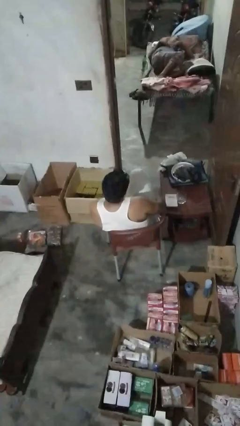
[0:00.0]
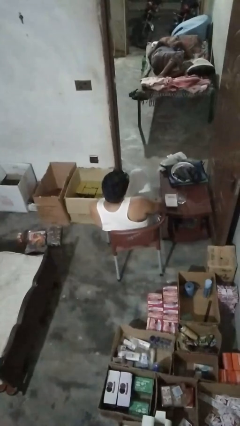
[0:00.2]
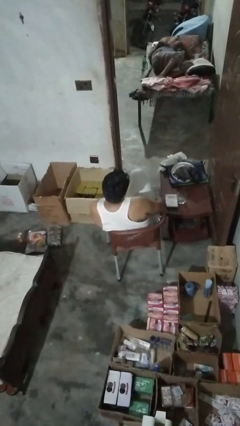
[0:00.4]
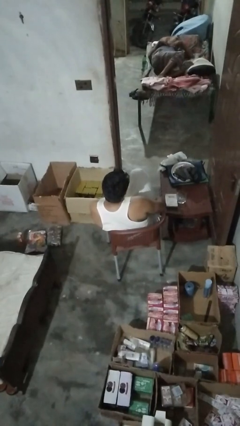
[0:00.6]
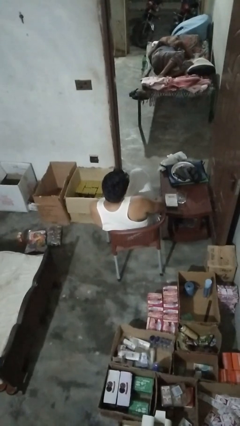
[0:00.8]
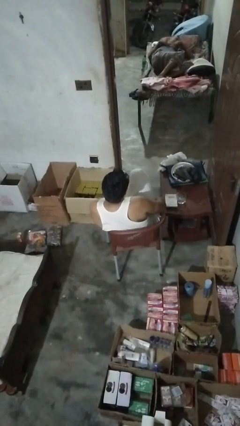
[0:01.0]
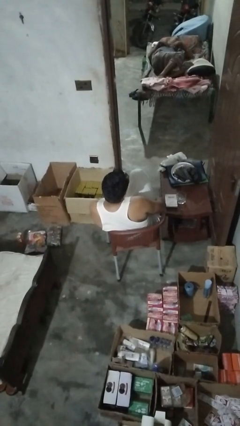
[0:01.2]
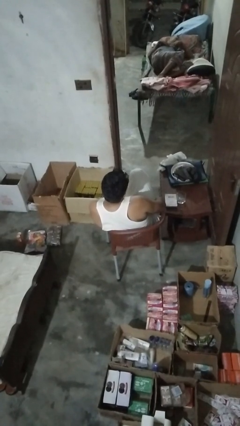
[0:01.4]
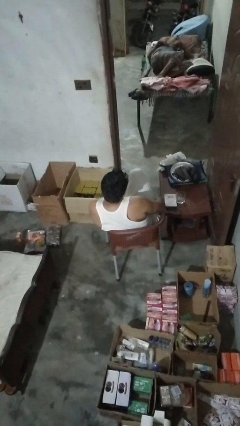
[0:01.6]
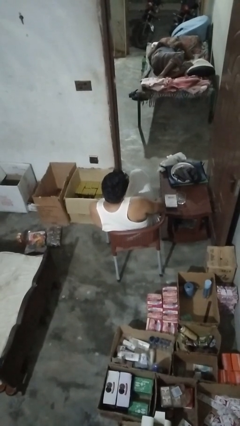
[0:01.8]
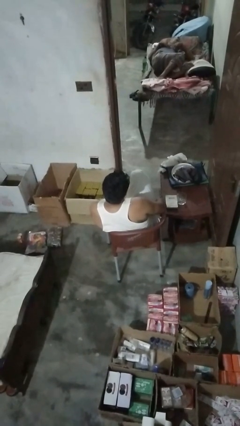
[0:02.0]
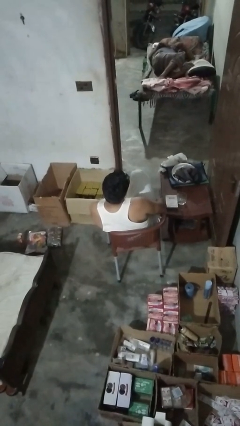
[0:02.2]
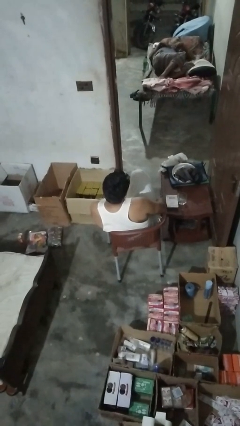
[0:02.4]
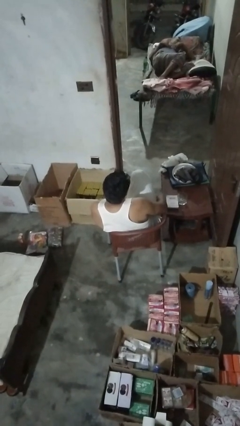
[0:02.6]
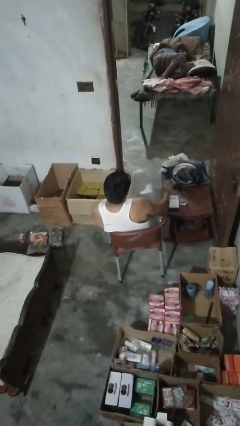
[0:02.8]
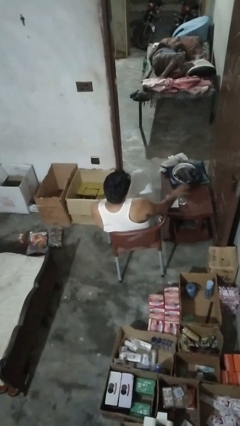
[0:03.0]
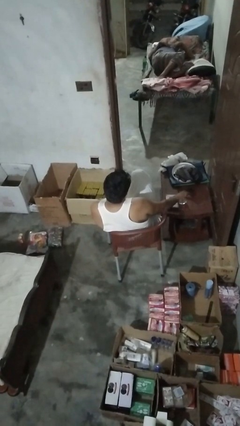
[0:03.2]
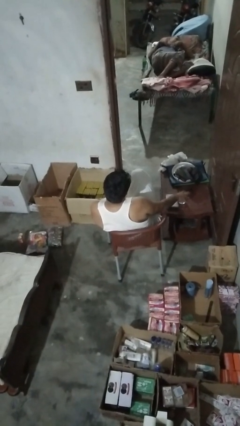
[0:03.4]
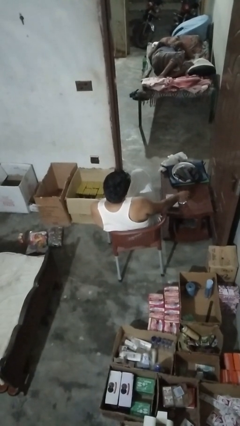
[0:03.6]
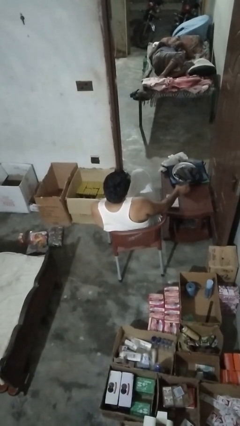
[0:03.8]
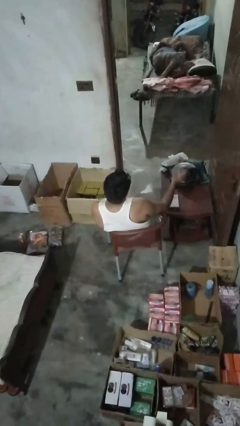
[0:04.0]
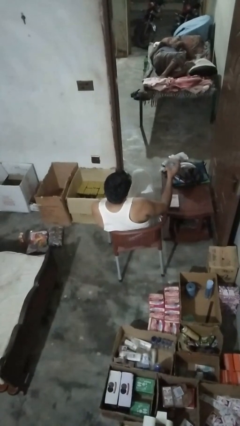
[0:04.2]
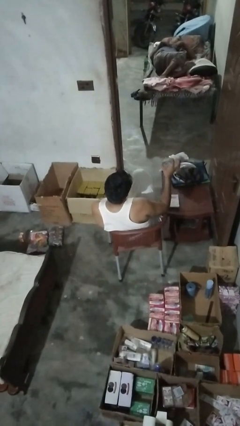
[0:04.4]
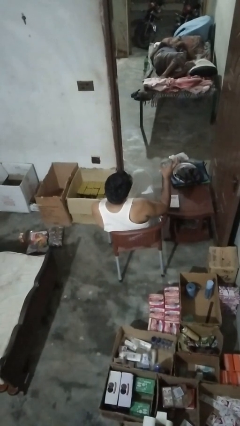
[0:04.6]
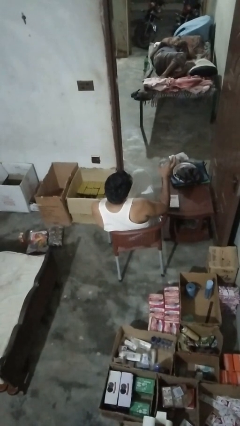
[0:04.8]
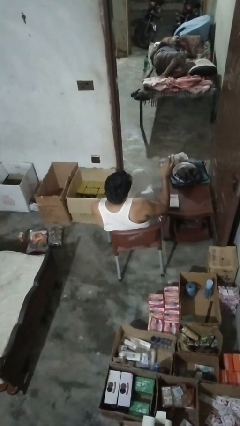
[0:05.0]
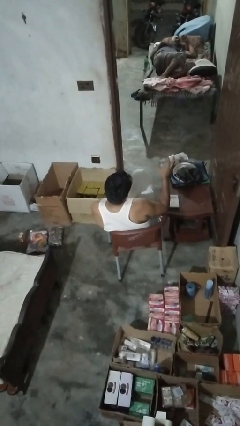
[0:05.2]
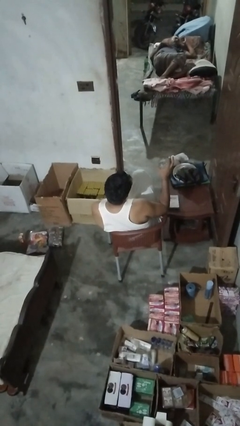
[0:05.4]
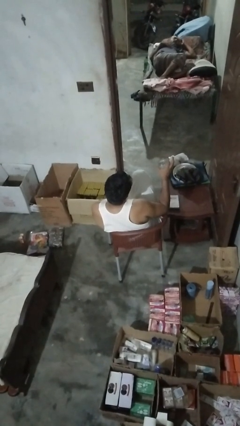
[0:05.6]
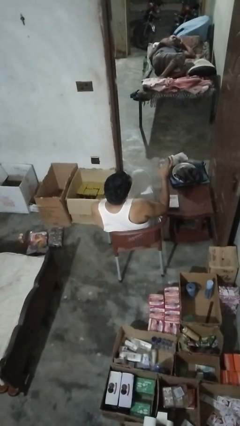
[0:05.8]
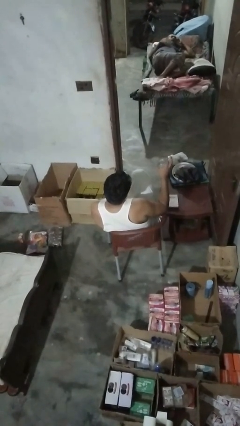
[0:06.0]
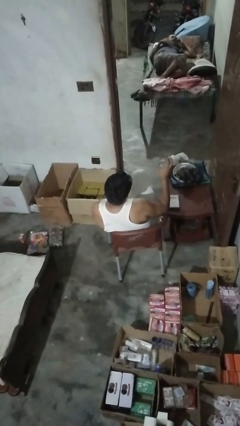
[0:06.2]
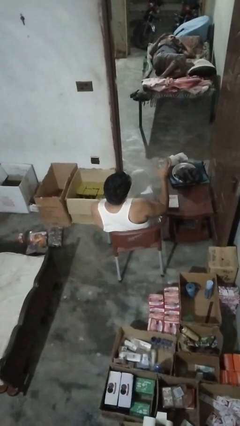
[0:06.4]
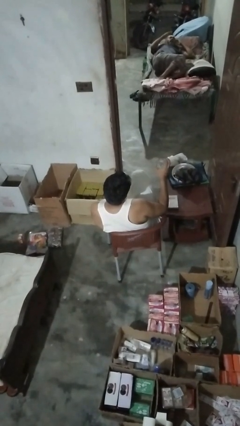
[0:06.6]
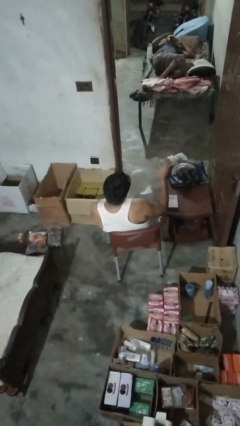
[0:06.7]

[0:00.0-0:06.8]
person knocks over glass

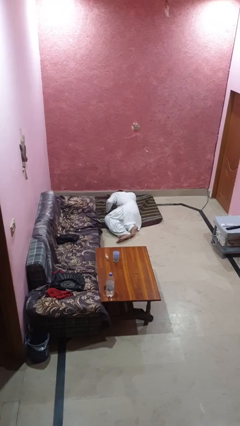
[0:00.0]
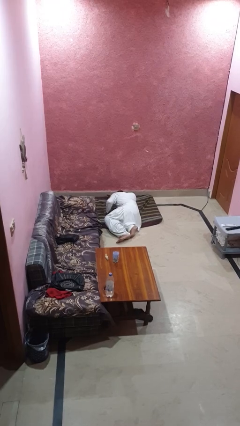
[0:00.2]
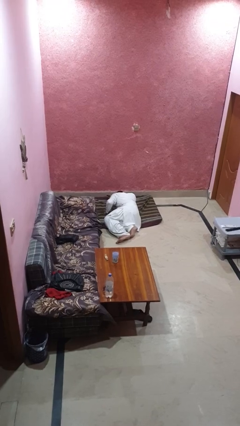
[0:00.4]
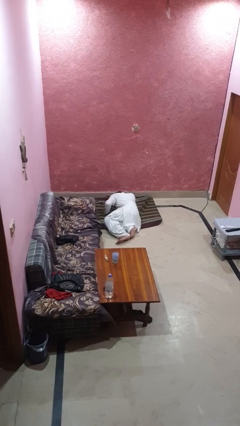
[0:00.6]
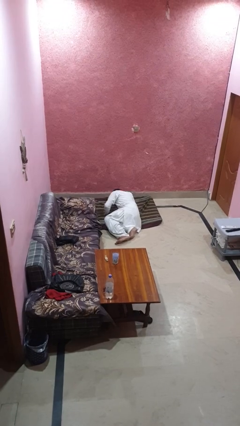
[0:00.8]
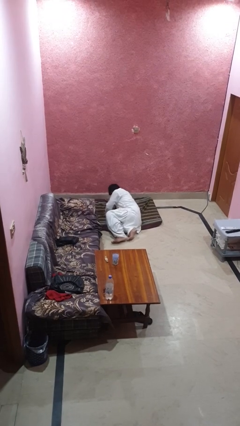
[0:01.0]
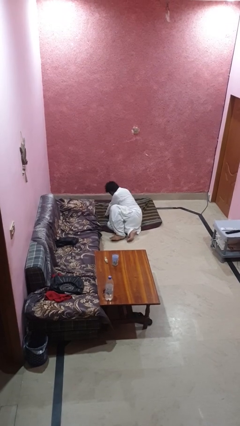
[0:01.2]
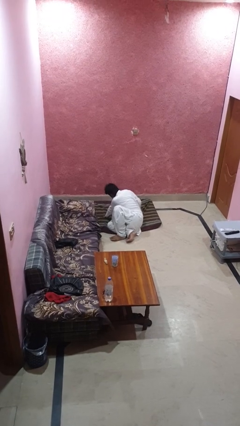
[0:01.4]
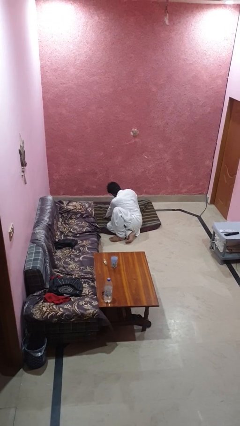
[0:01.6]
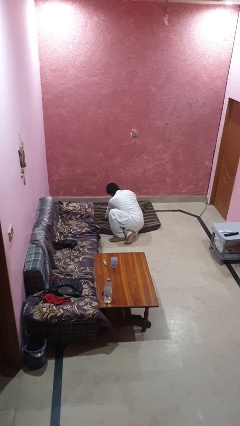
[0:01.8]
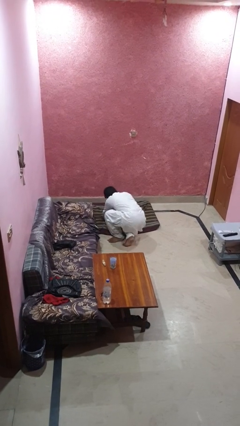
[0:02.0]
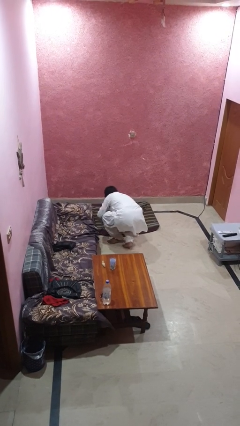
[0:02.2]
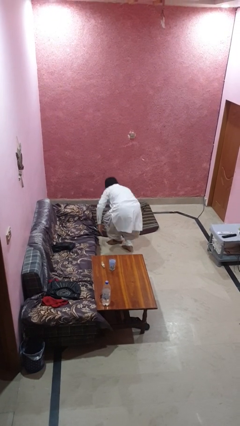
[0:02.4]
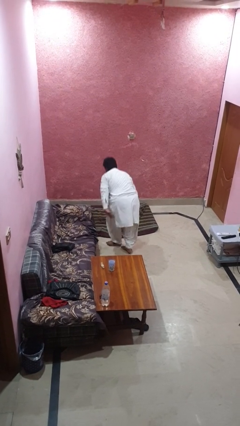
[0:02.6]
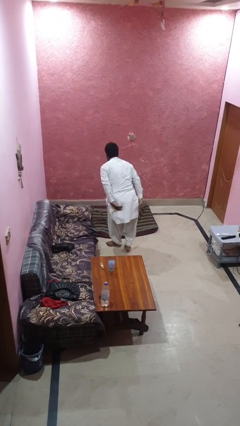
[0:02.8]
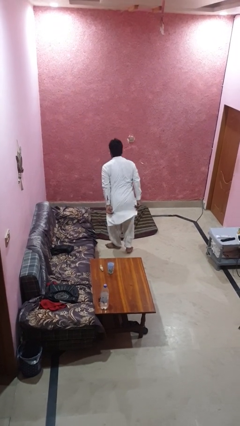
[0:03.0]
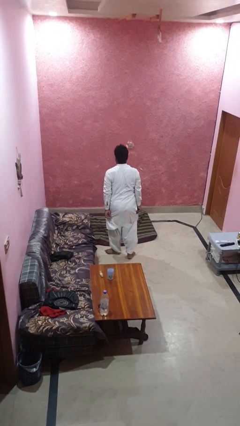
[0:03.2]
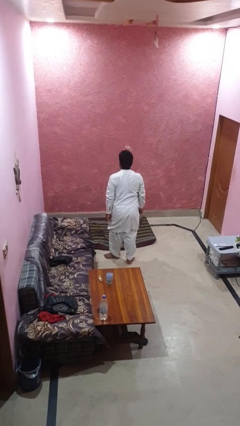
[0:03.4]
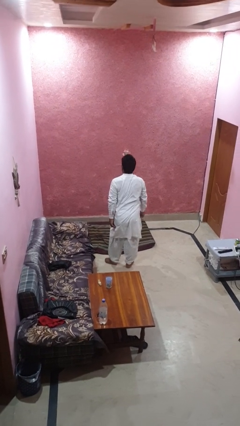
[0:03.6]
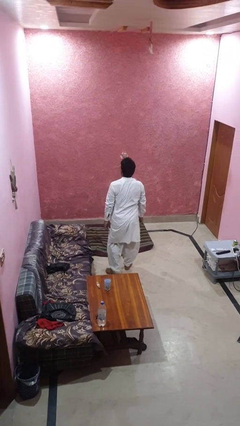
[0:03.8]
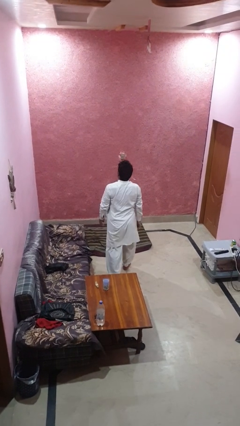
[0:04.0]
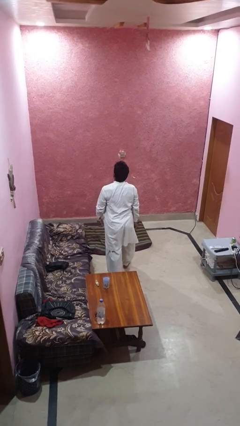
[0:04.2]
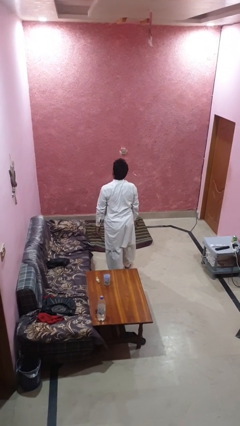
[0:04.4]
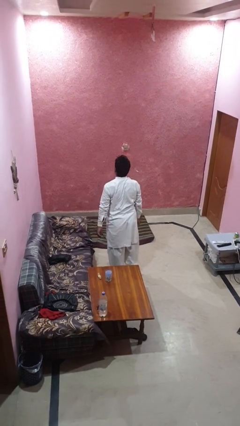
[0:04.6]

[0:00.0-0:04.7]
person stands up from floor

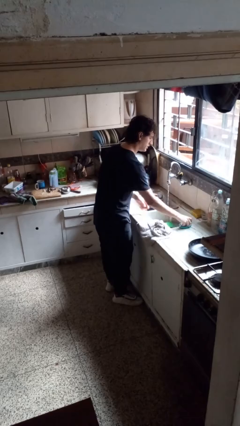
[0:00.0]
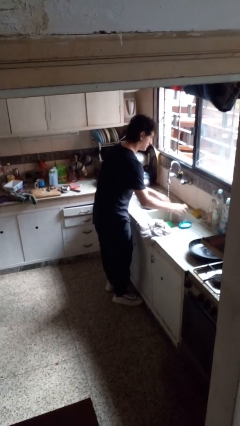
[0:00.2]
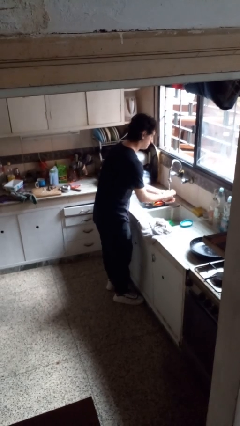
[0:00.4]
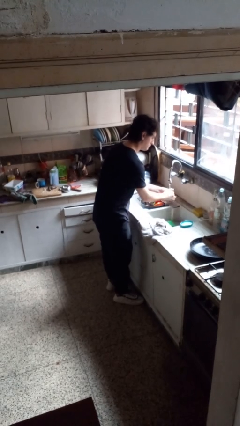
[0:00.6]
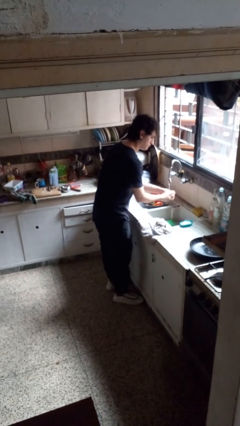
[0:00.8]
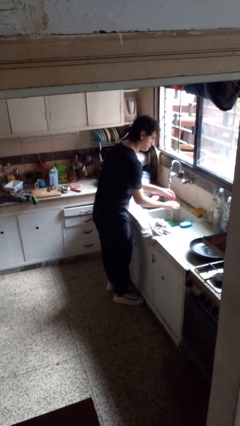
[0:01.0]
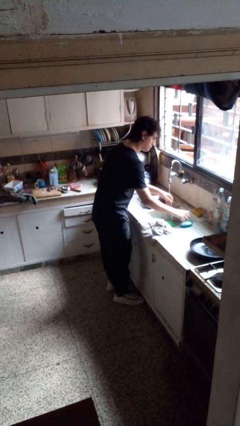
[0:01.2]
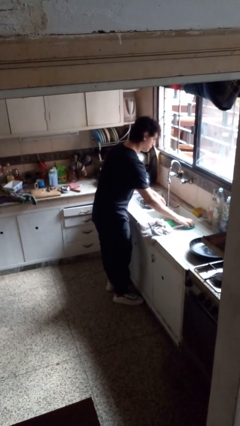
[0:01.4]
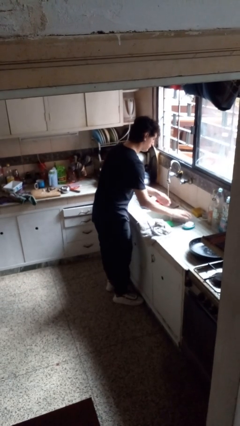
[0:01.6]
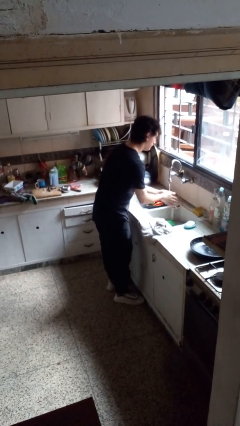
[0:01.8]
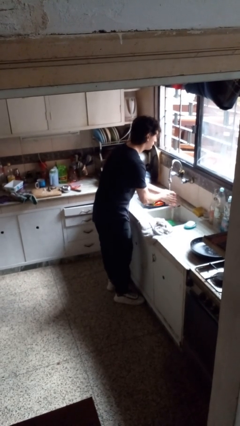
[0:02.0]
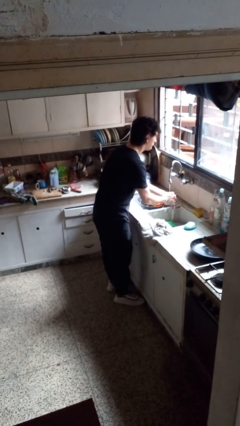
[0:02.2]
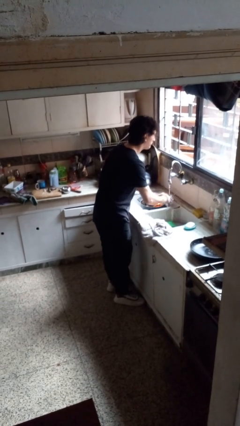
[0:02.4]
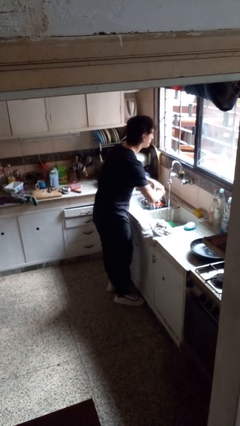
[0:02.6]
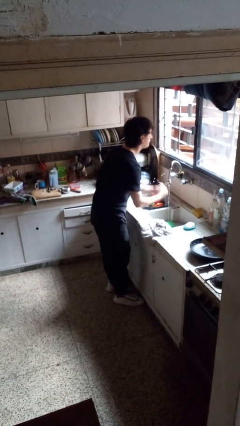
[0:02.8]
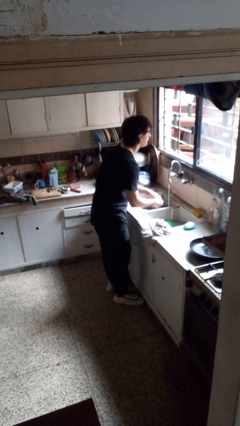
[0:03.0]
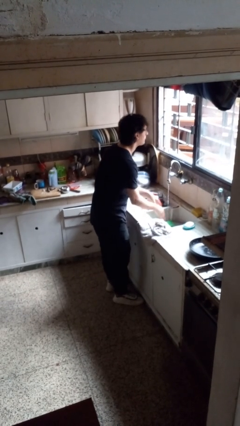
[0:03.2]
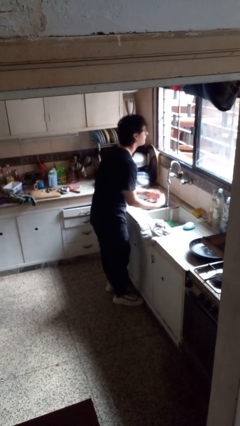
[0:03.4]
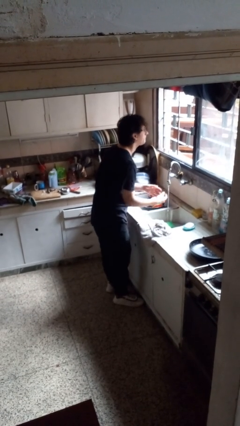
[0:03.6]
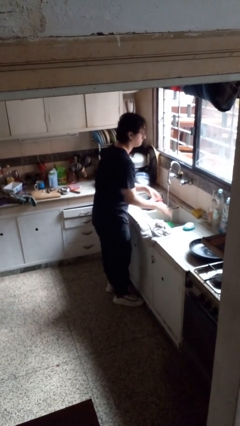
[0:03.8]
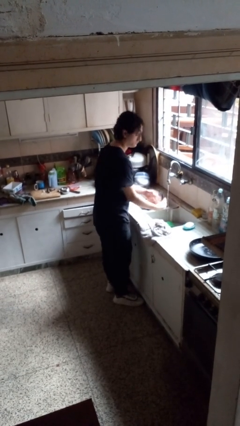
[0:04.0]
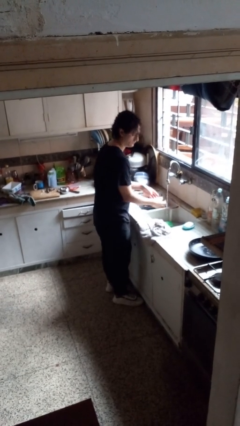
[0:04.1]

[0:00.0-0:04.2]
person washes hands

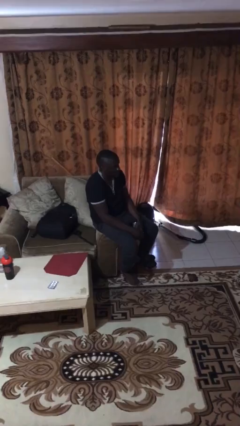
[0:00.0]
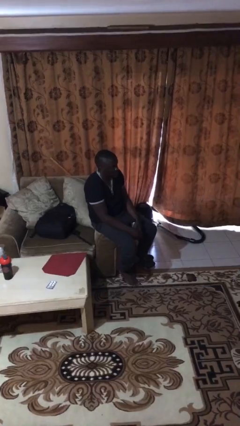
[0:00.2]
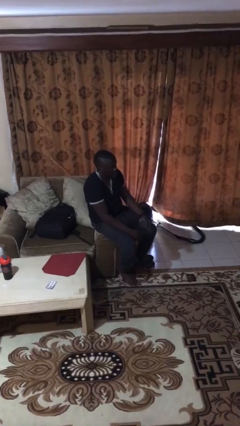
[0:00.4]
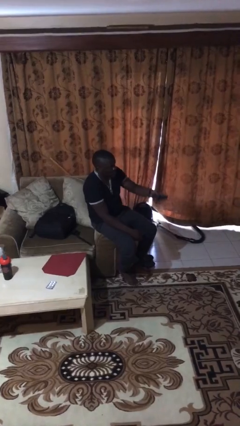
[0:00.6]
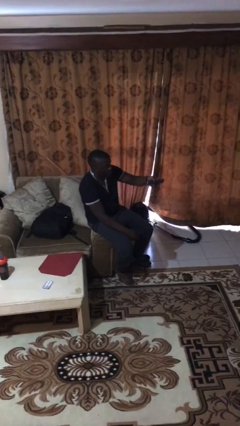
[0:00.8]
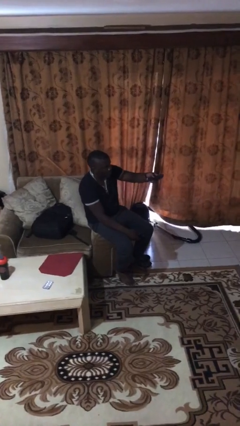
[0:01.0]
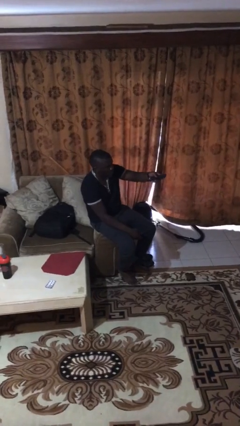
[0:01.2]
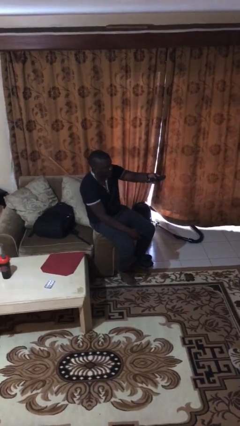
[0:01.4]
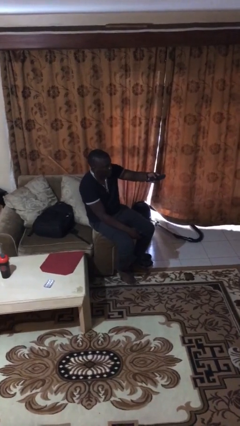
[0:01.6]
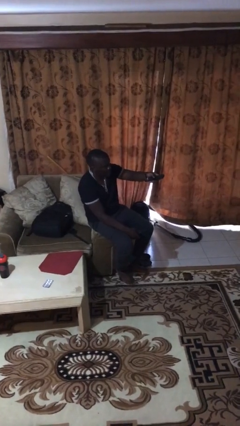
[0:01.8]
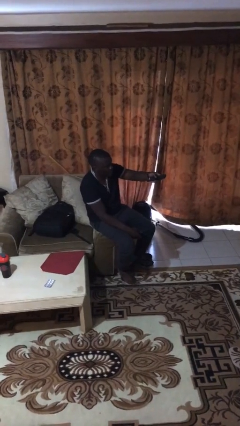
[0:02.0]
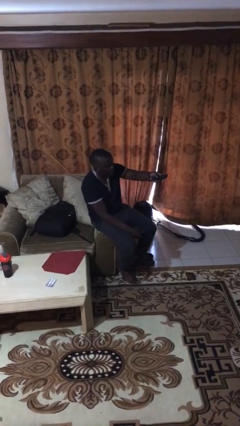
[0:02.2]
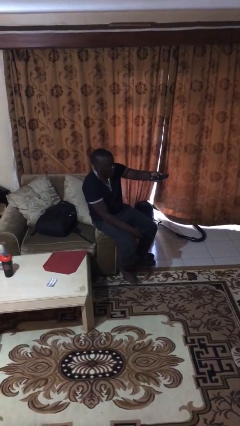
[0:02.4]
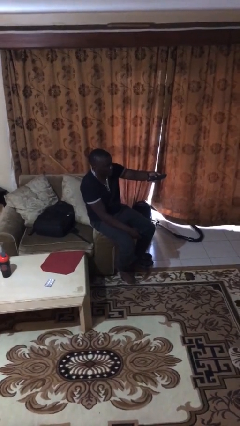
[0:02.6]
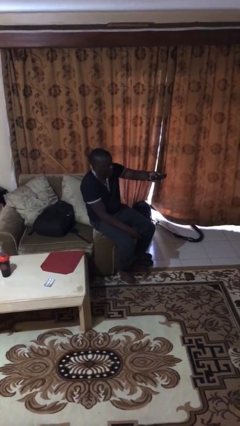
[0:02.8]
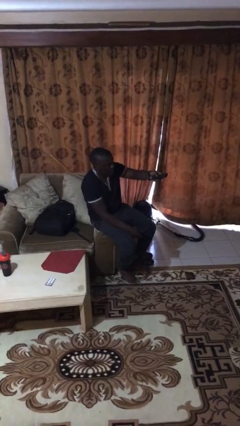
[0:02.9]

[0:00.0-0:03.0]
person uses television remote
